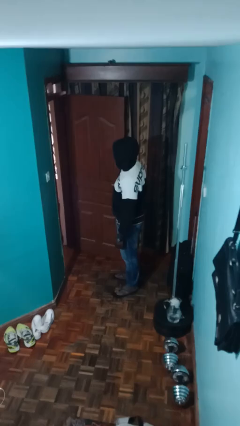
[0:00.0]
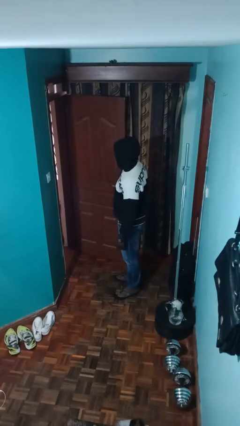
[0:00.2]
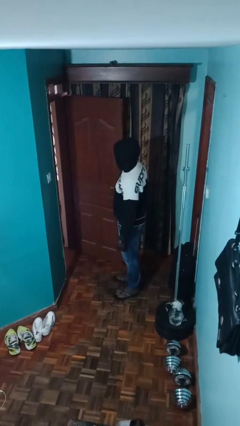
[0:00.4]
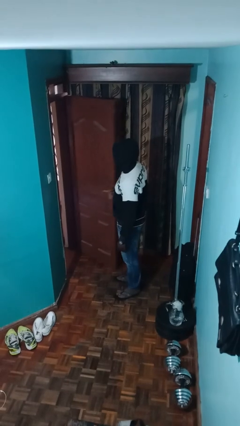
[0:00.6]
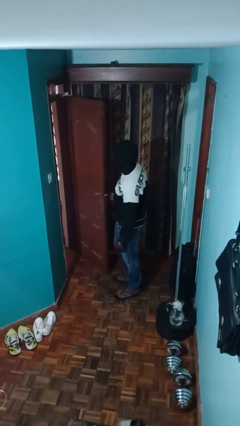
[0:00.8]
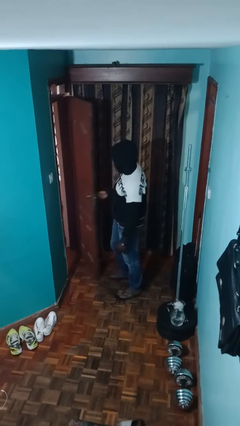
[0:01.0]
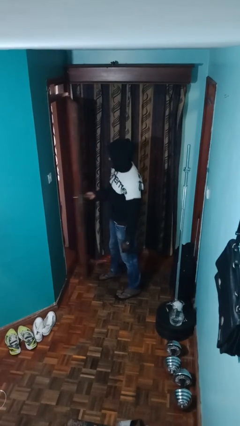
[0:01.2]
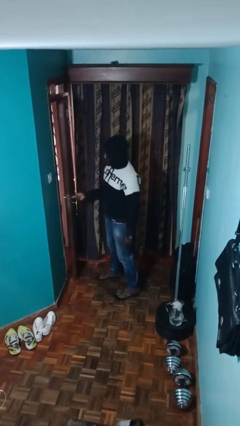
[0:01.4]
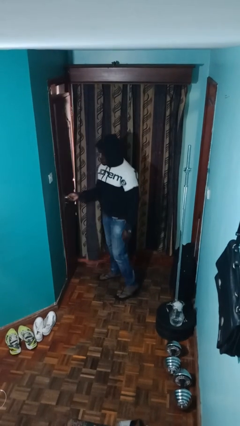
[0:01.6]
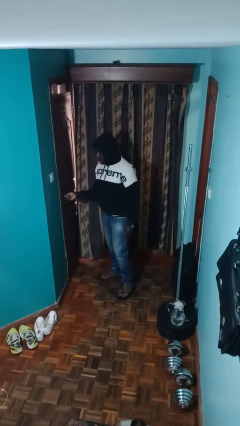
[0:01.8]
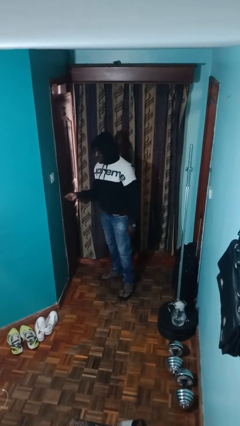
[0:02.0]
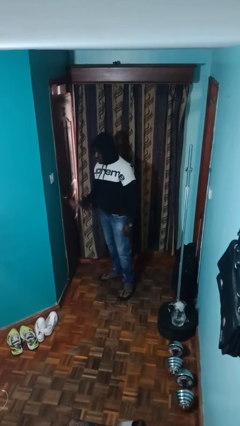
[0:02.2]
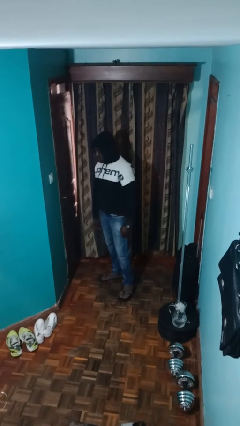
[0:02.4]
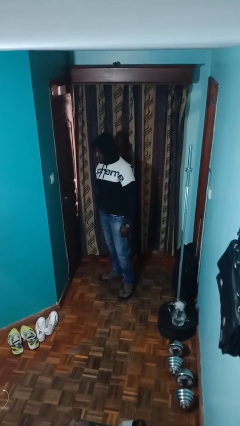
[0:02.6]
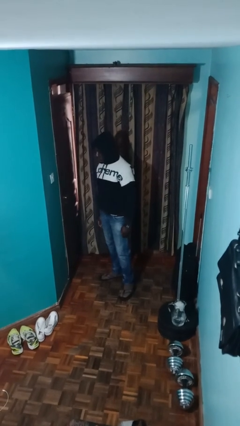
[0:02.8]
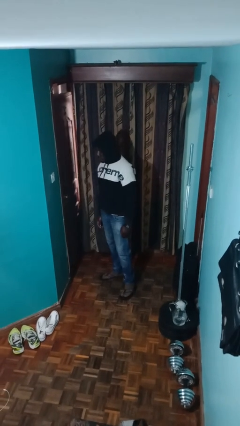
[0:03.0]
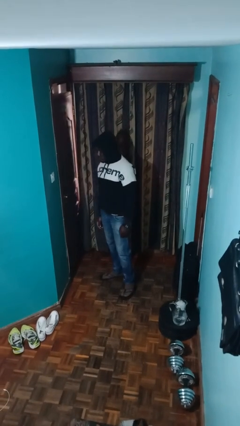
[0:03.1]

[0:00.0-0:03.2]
person closes facility door

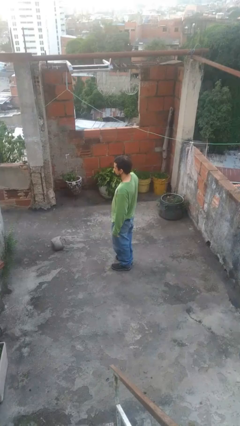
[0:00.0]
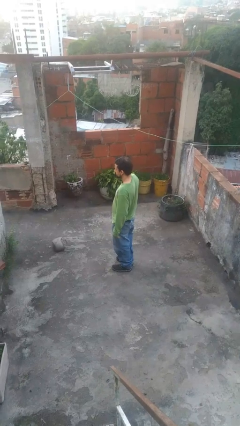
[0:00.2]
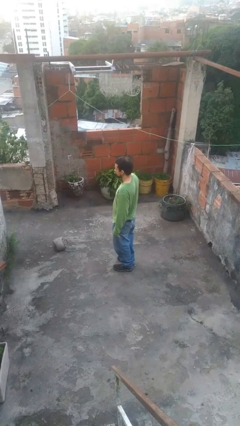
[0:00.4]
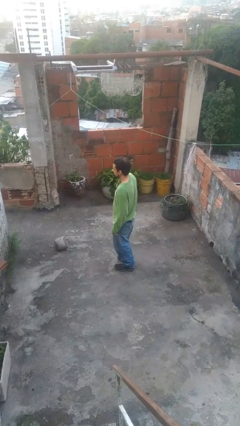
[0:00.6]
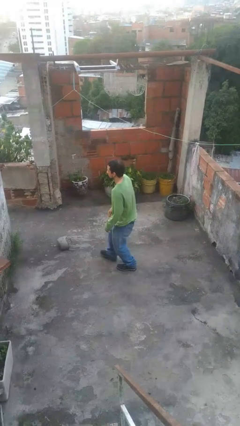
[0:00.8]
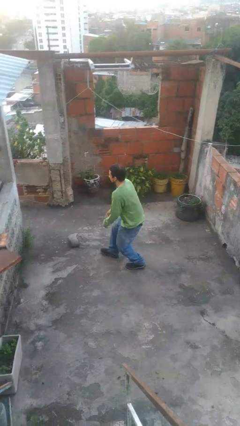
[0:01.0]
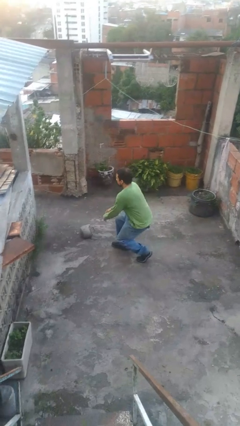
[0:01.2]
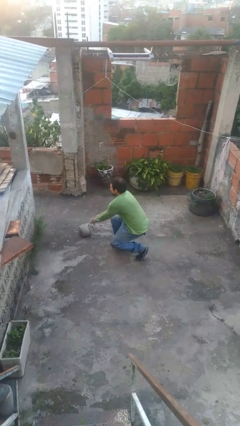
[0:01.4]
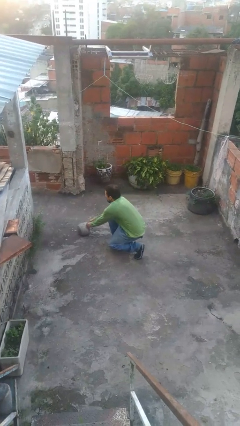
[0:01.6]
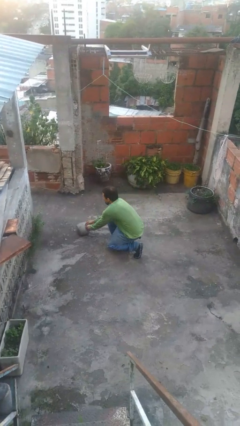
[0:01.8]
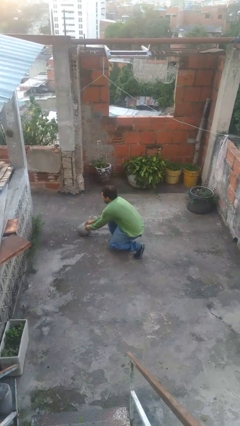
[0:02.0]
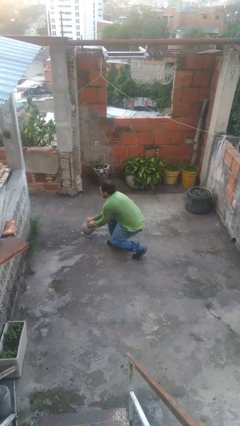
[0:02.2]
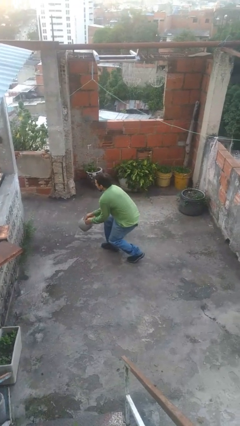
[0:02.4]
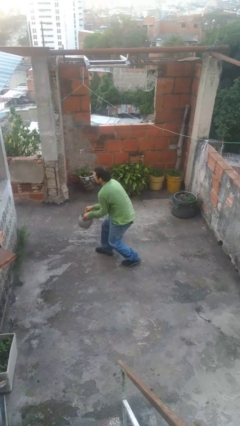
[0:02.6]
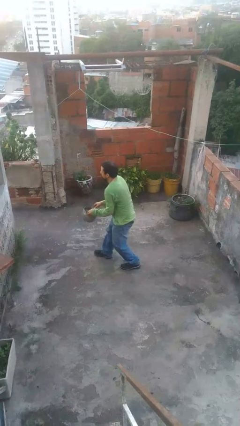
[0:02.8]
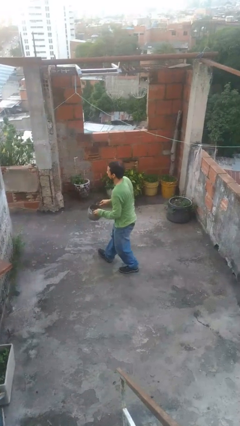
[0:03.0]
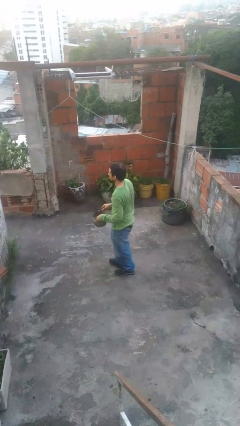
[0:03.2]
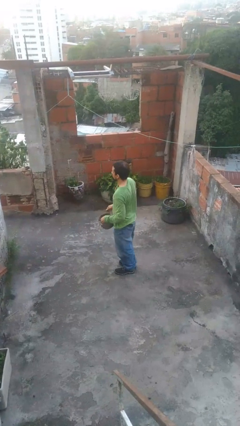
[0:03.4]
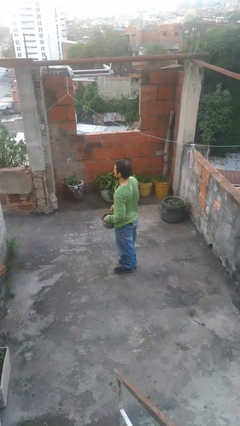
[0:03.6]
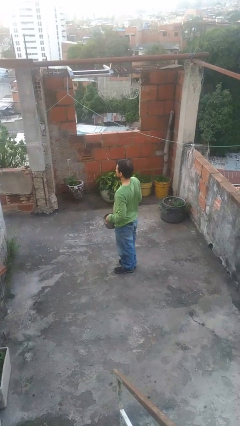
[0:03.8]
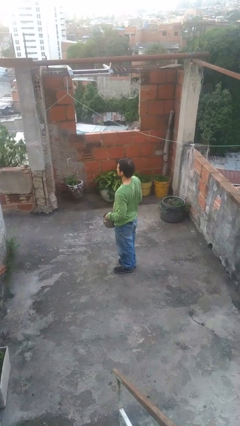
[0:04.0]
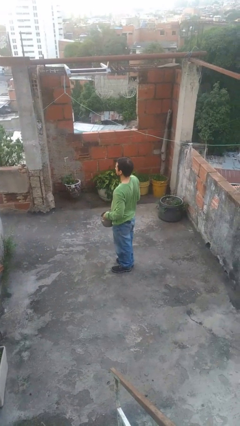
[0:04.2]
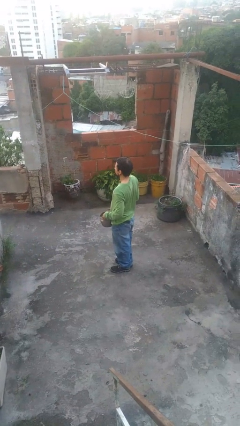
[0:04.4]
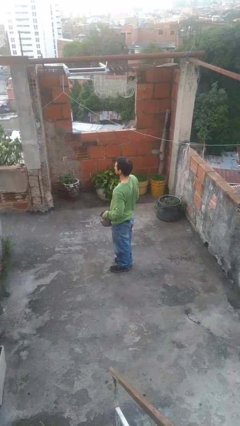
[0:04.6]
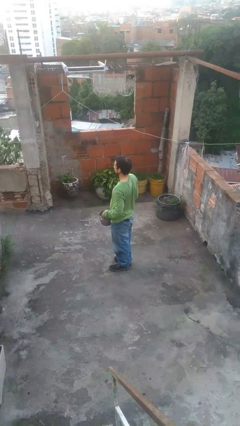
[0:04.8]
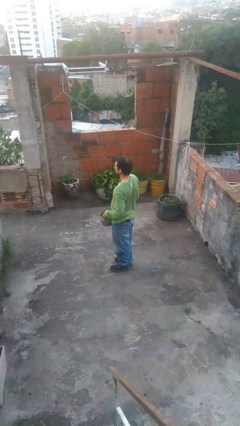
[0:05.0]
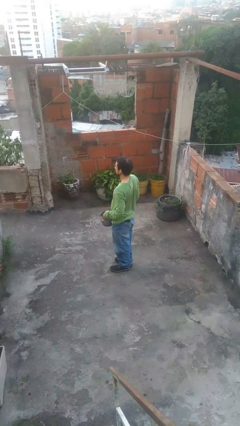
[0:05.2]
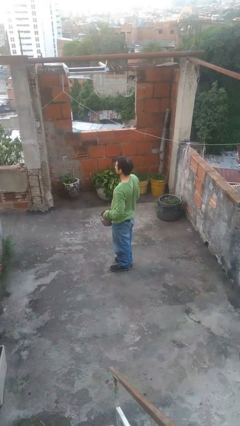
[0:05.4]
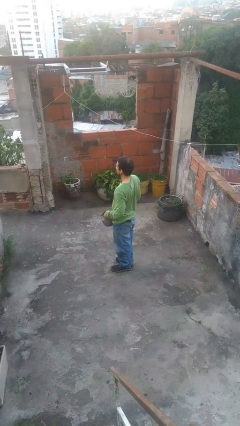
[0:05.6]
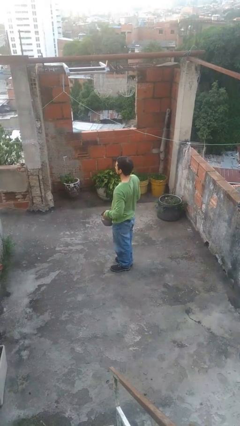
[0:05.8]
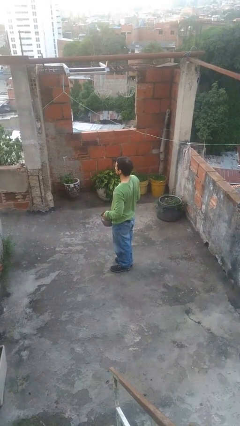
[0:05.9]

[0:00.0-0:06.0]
person picks up object from floor

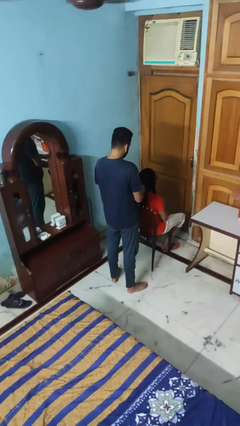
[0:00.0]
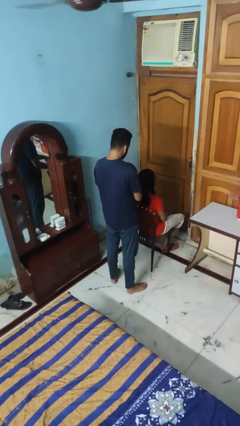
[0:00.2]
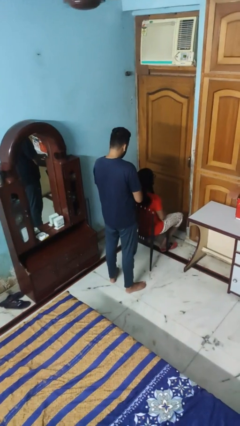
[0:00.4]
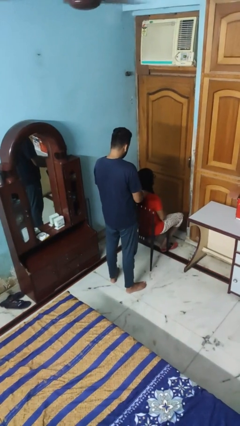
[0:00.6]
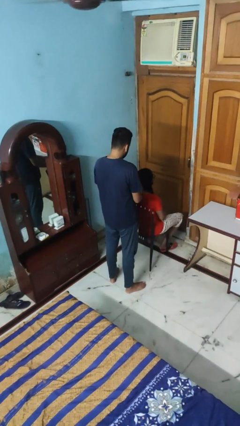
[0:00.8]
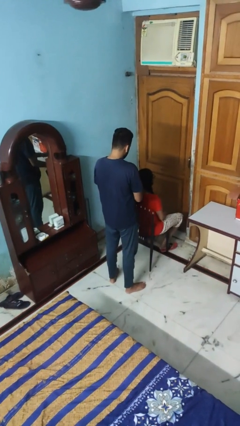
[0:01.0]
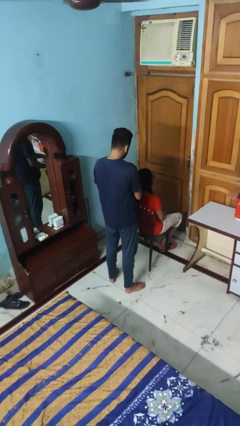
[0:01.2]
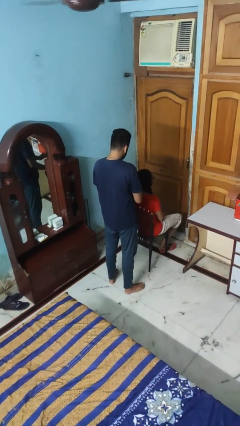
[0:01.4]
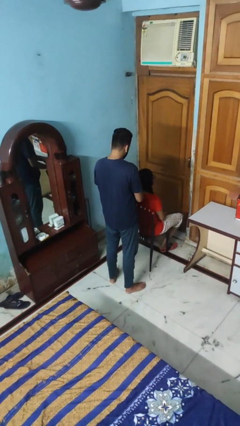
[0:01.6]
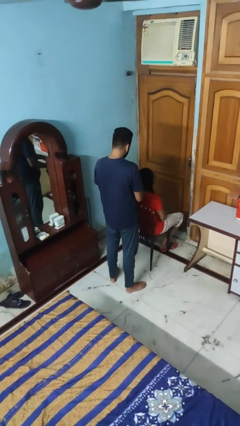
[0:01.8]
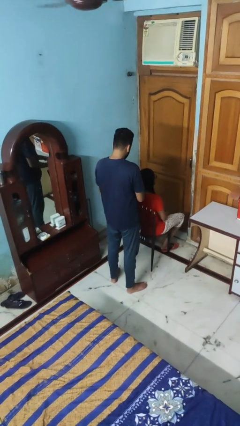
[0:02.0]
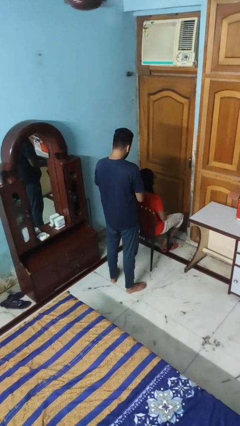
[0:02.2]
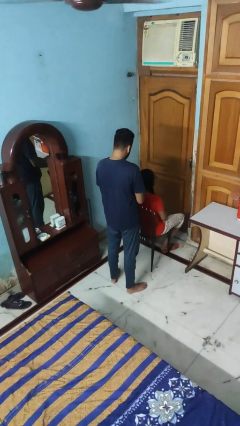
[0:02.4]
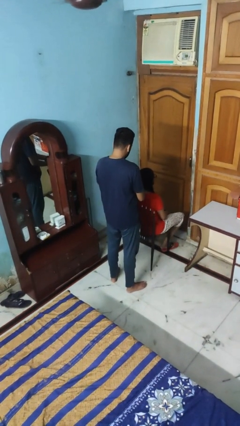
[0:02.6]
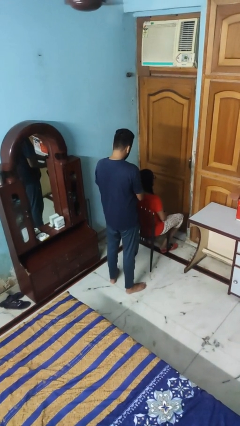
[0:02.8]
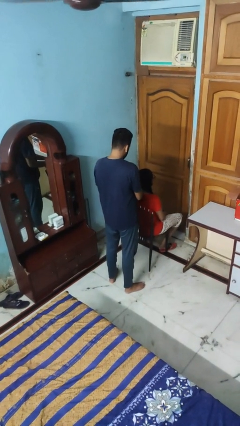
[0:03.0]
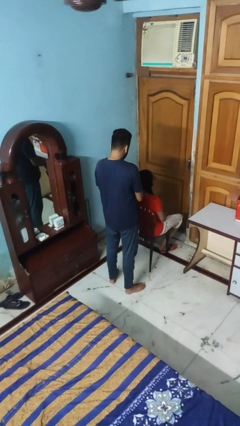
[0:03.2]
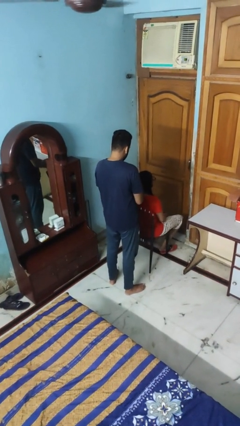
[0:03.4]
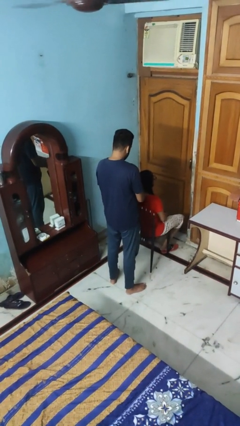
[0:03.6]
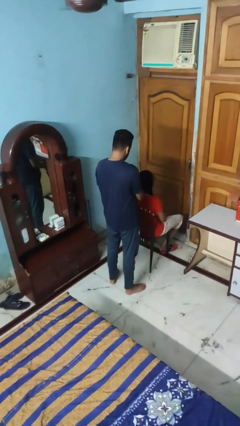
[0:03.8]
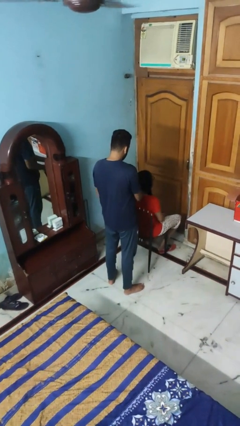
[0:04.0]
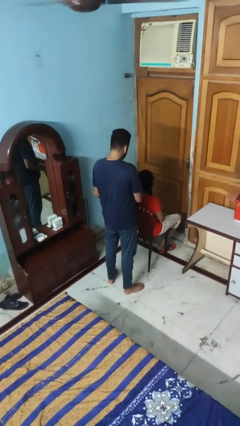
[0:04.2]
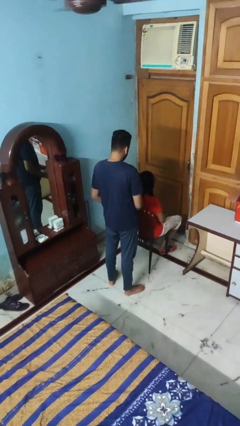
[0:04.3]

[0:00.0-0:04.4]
person braids hair of person

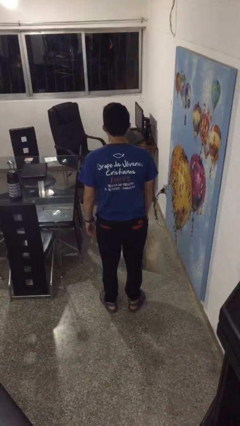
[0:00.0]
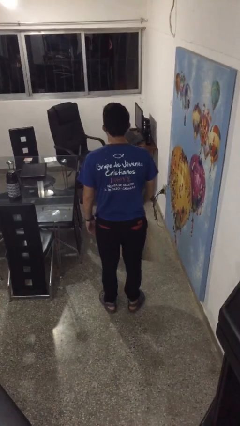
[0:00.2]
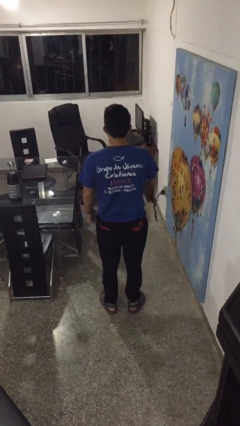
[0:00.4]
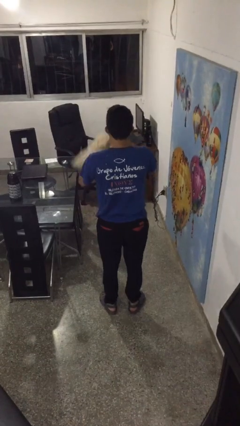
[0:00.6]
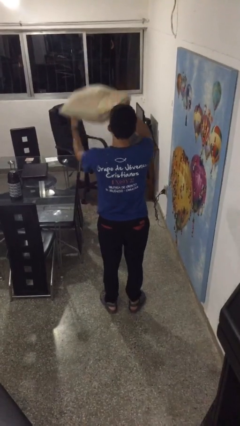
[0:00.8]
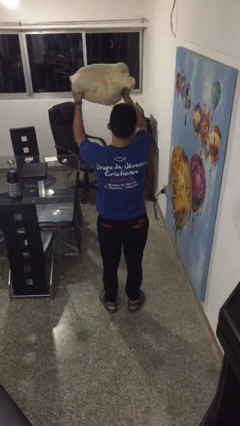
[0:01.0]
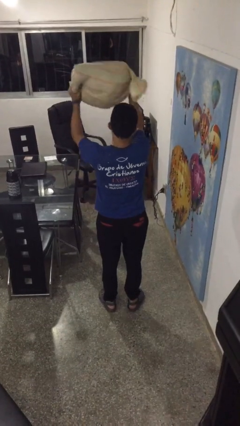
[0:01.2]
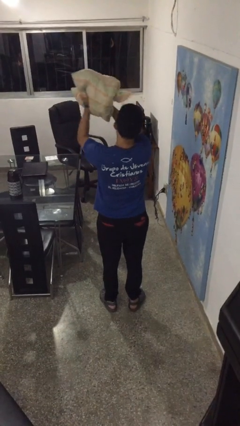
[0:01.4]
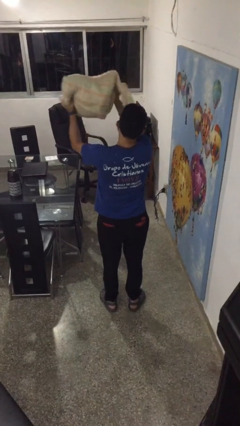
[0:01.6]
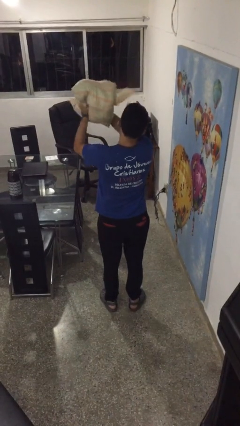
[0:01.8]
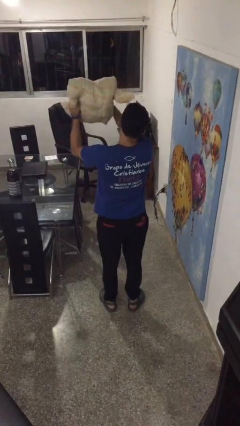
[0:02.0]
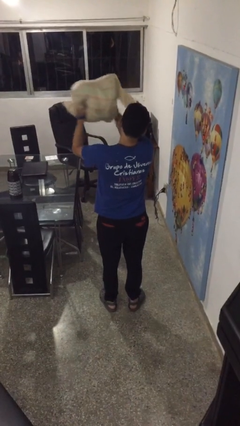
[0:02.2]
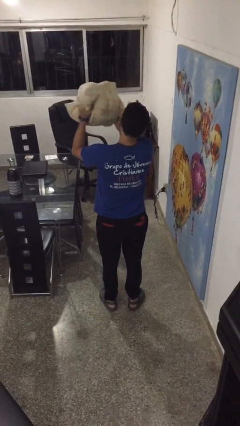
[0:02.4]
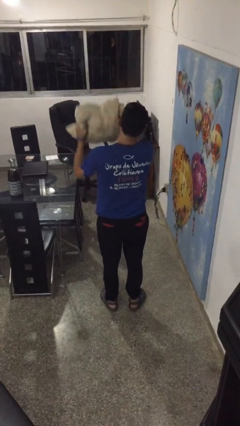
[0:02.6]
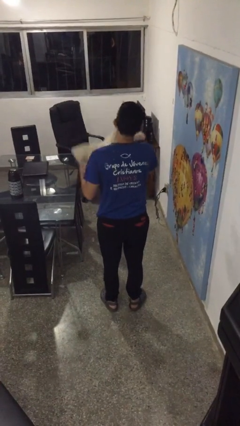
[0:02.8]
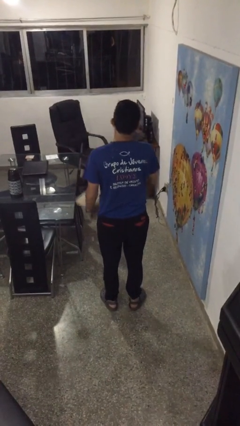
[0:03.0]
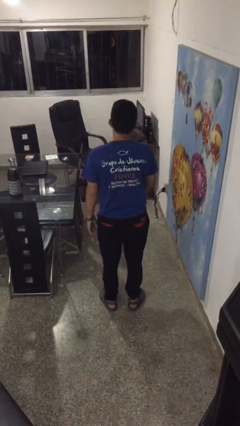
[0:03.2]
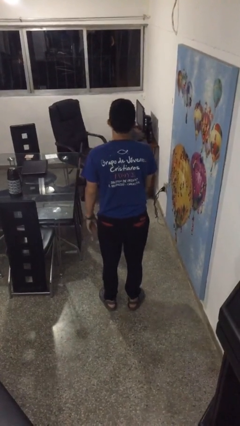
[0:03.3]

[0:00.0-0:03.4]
person squeezes object

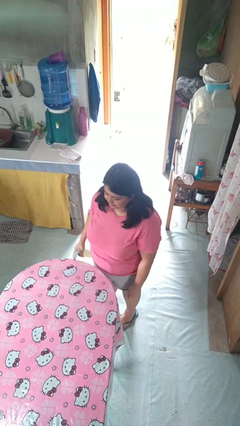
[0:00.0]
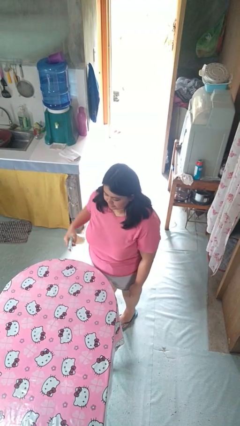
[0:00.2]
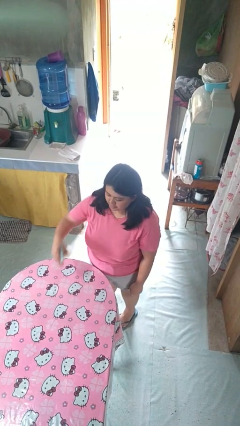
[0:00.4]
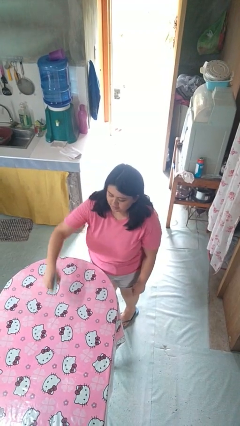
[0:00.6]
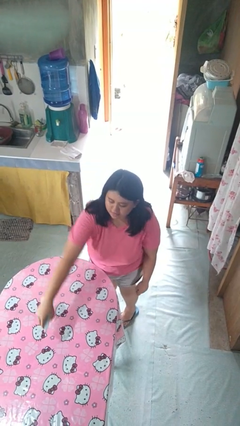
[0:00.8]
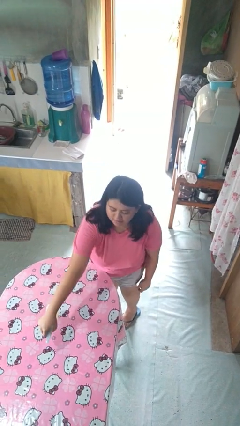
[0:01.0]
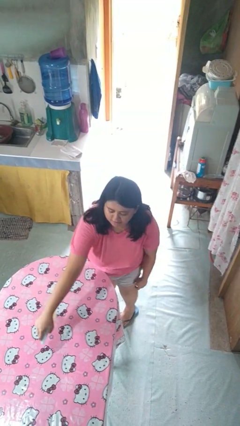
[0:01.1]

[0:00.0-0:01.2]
person sprays from bottle
